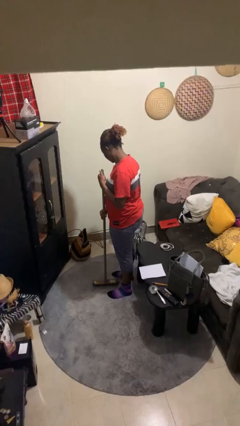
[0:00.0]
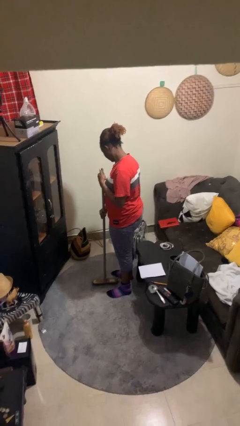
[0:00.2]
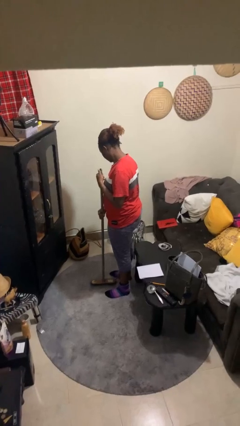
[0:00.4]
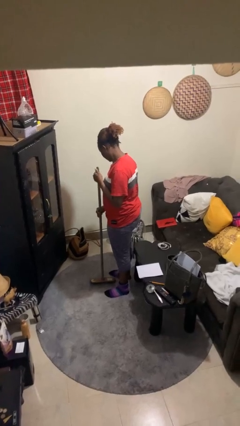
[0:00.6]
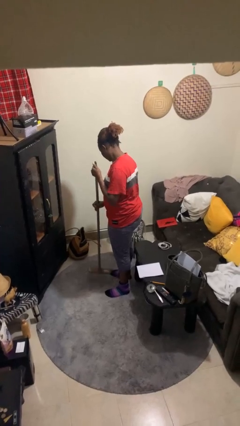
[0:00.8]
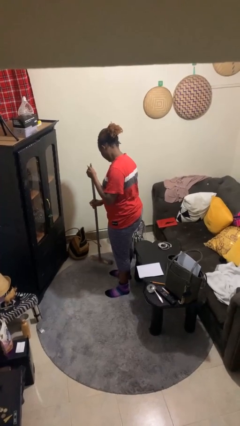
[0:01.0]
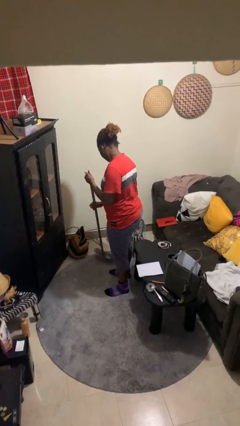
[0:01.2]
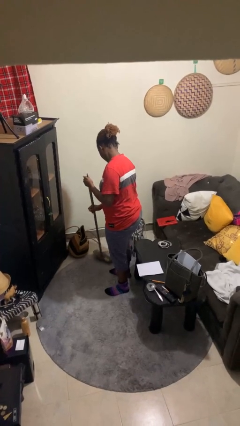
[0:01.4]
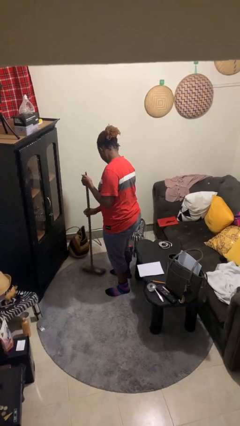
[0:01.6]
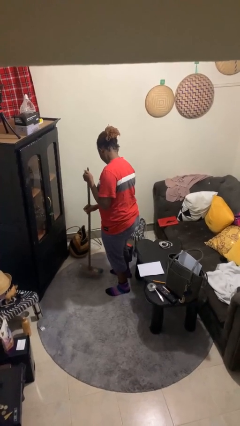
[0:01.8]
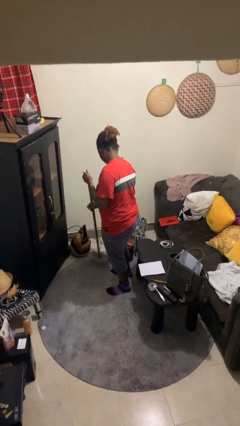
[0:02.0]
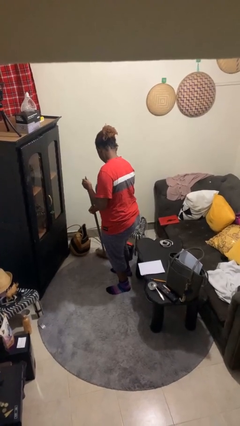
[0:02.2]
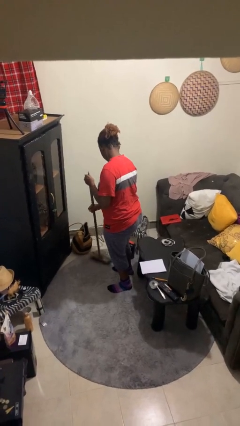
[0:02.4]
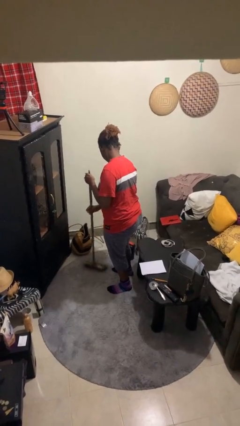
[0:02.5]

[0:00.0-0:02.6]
person sweeps floor

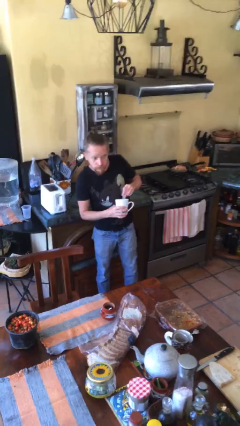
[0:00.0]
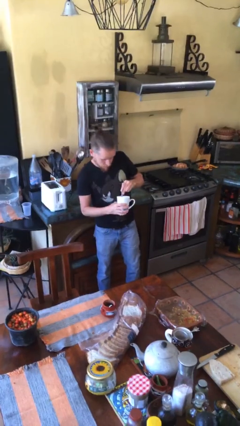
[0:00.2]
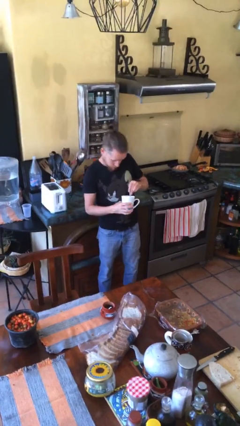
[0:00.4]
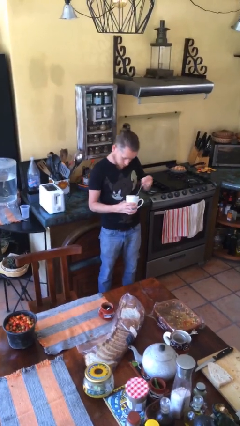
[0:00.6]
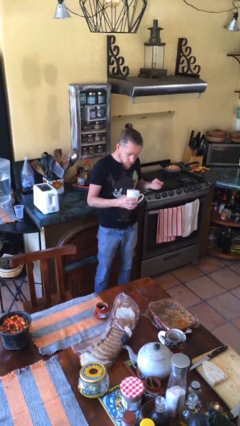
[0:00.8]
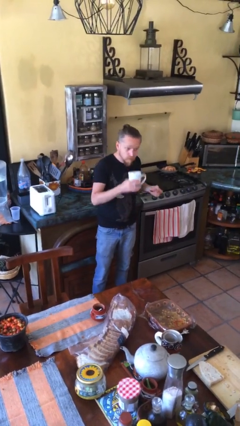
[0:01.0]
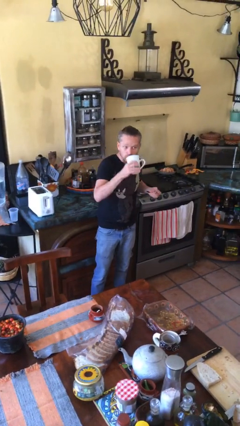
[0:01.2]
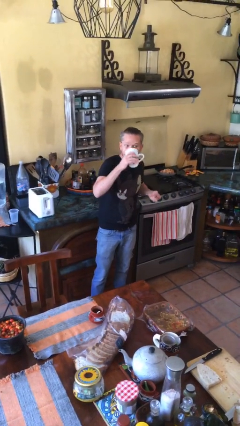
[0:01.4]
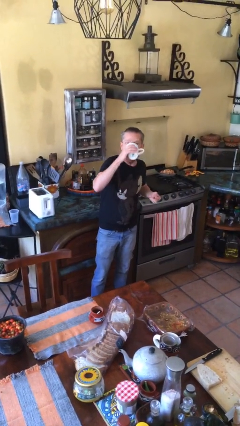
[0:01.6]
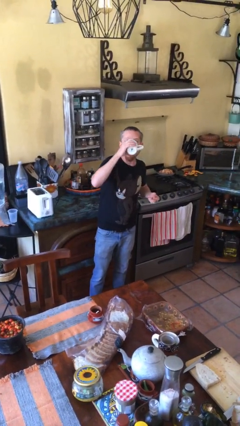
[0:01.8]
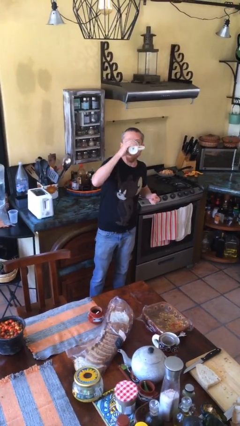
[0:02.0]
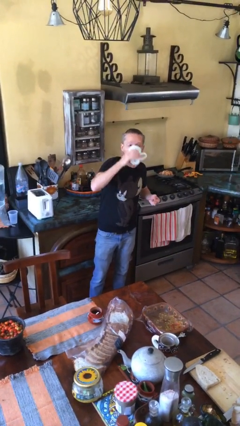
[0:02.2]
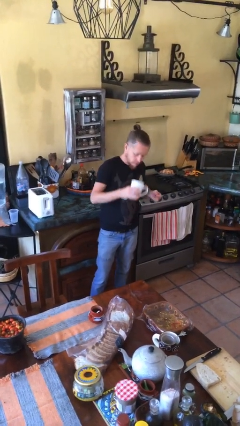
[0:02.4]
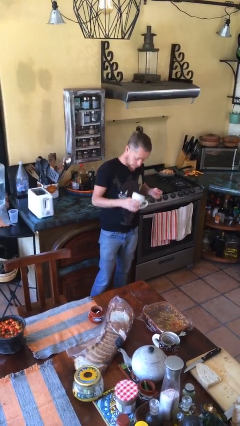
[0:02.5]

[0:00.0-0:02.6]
person drinks from mug

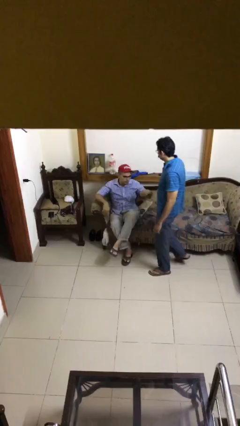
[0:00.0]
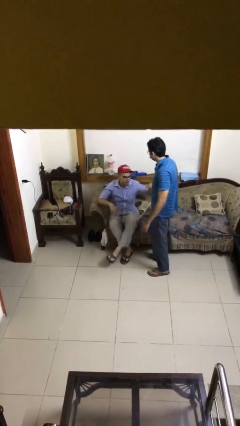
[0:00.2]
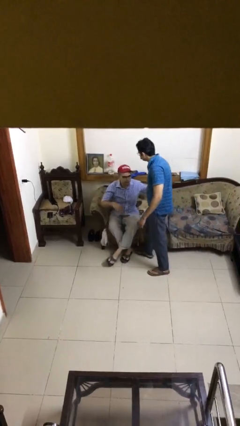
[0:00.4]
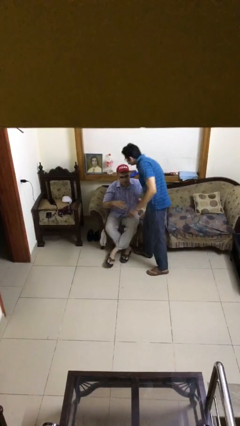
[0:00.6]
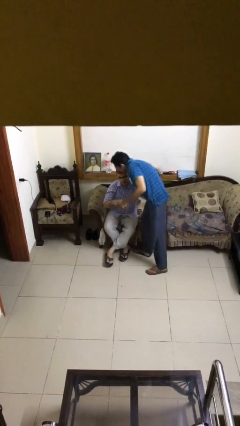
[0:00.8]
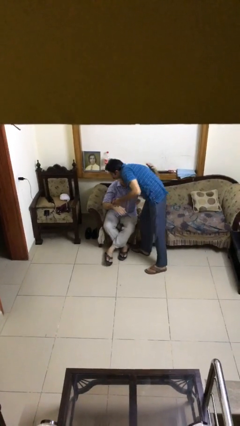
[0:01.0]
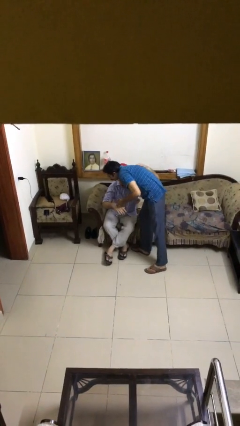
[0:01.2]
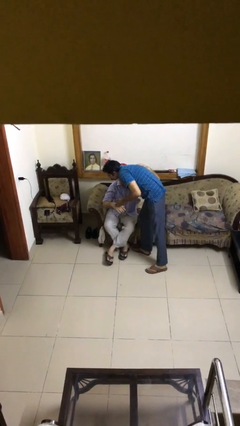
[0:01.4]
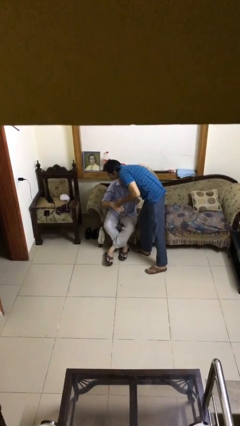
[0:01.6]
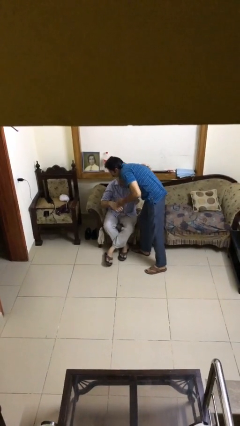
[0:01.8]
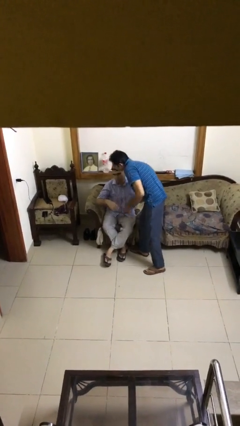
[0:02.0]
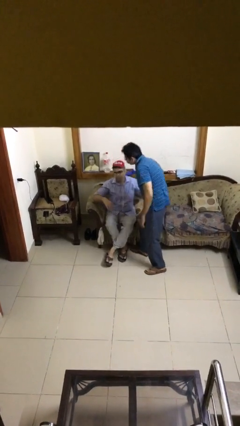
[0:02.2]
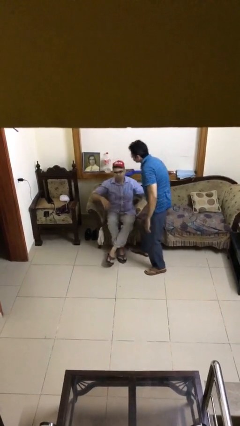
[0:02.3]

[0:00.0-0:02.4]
person embraces person

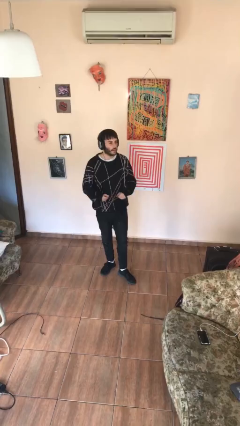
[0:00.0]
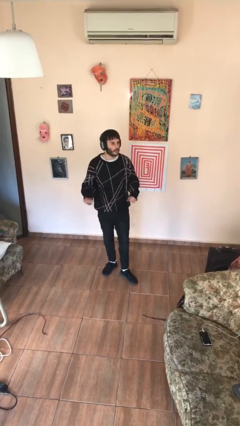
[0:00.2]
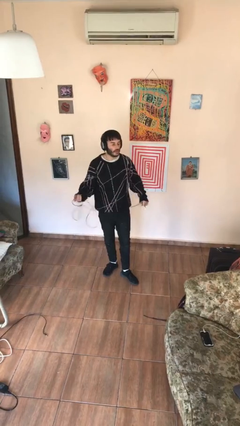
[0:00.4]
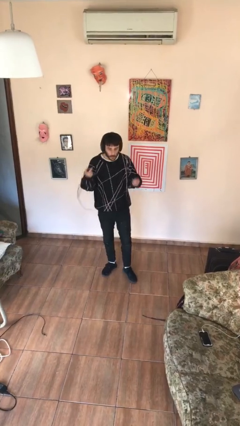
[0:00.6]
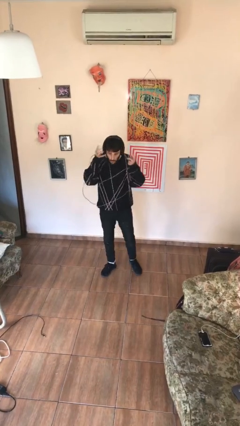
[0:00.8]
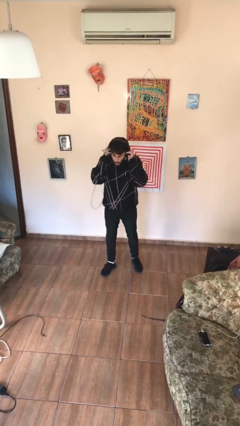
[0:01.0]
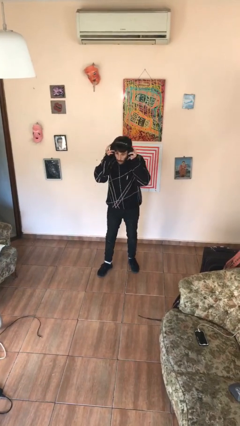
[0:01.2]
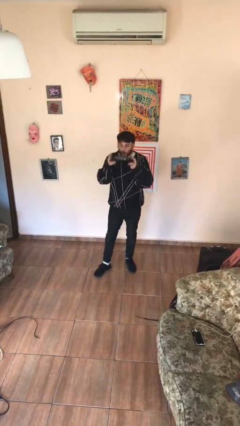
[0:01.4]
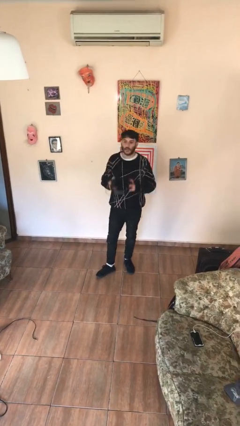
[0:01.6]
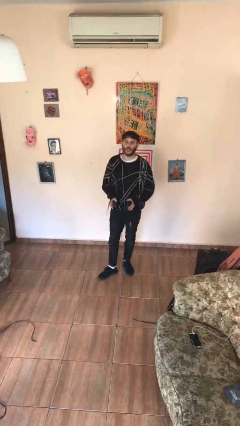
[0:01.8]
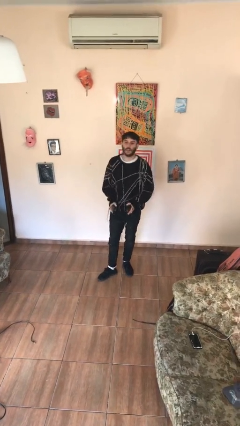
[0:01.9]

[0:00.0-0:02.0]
person takes off headphones

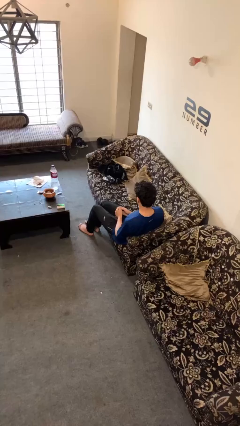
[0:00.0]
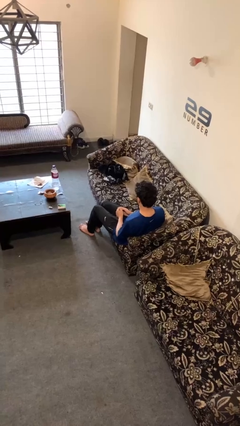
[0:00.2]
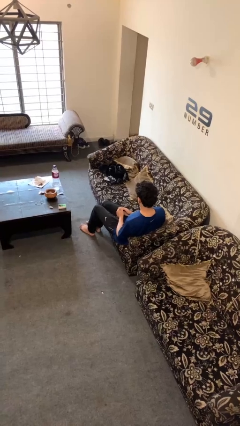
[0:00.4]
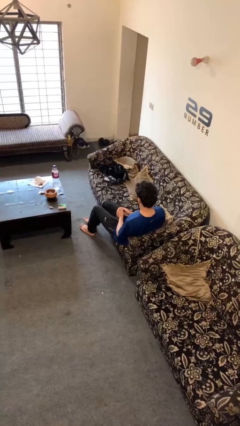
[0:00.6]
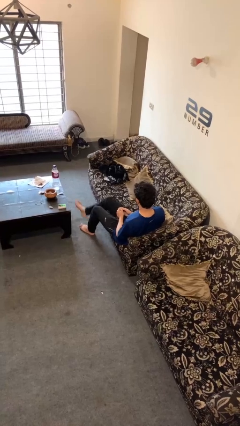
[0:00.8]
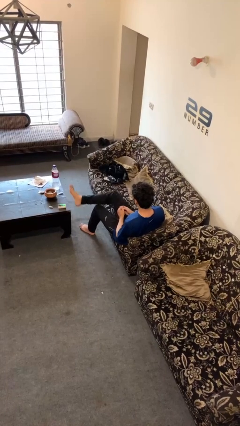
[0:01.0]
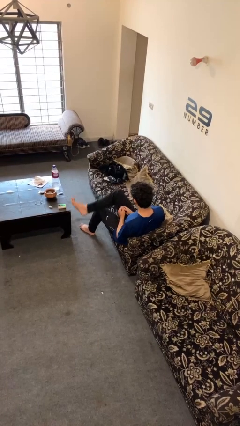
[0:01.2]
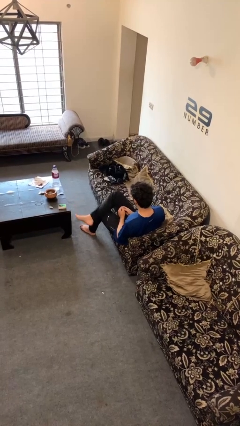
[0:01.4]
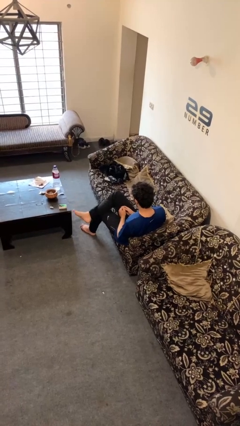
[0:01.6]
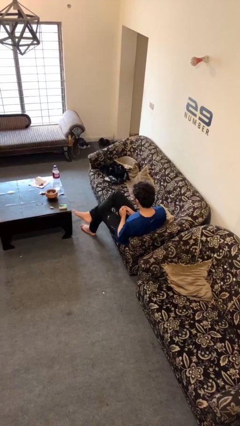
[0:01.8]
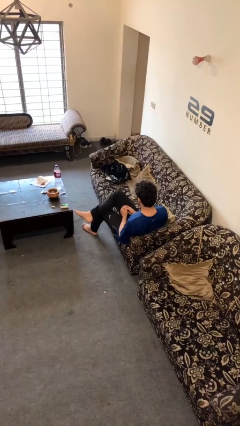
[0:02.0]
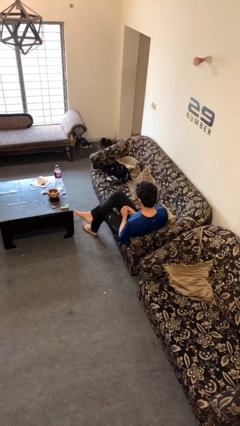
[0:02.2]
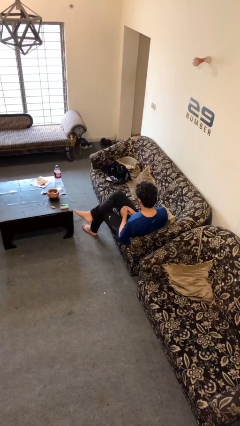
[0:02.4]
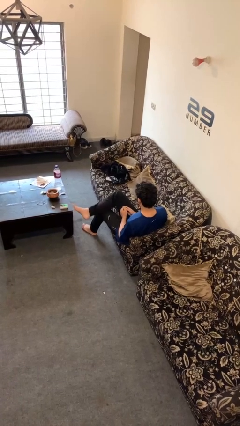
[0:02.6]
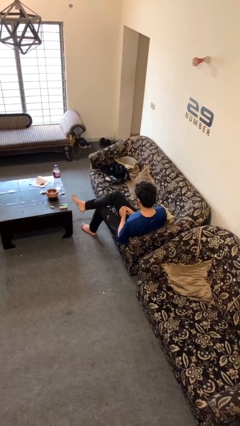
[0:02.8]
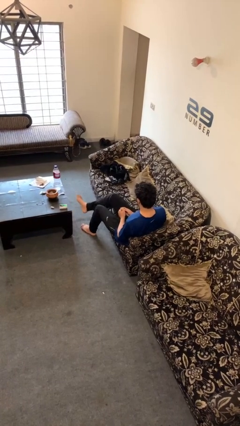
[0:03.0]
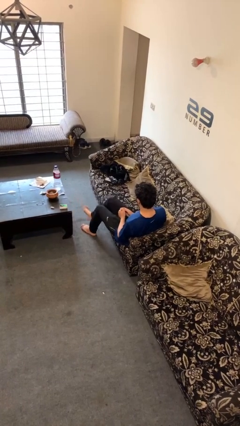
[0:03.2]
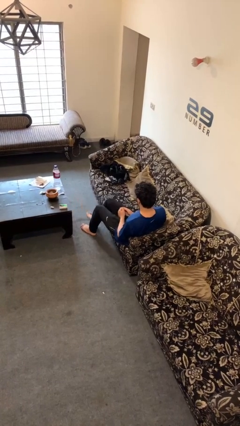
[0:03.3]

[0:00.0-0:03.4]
person crosses legs

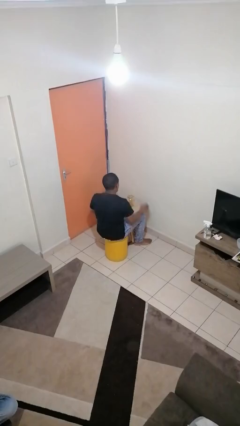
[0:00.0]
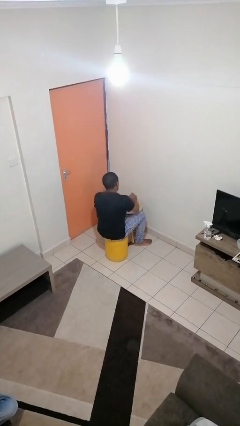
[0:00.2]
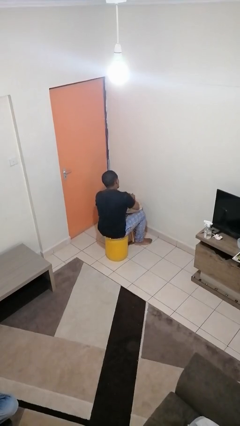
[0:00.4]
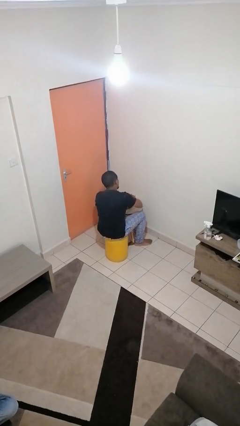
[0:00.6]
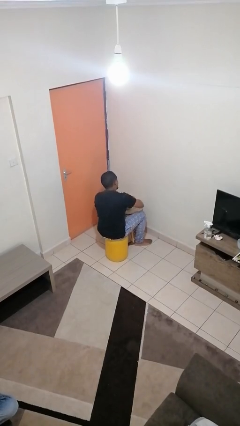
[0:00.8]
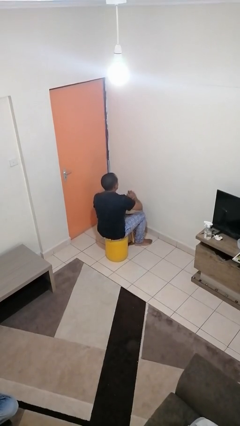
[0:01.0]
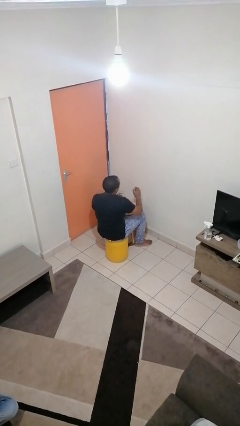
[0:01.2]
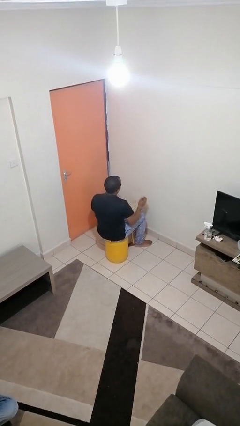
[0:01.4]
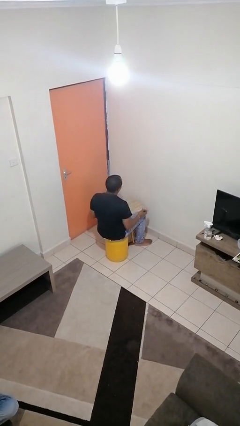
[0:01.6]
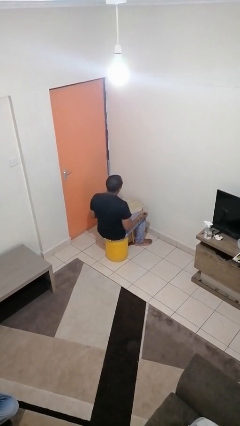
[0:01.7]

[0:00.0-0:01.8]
person opens jar

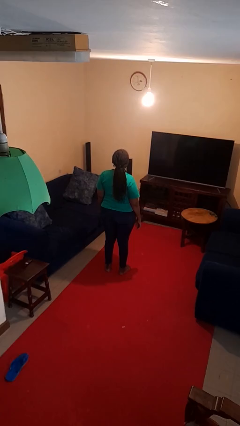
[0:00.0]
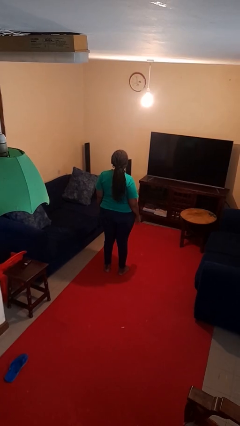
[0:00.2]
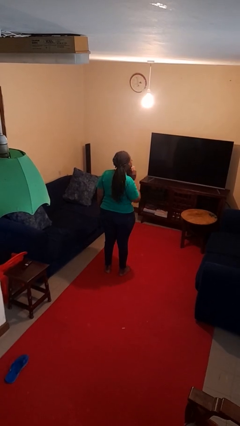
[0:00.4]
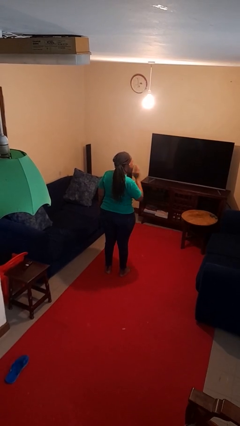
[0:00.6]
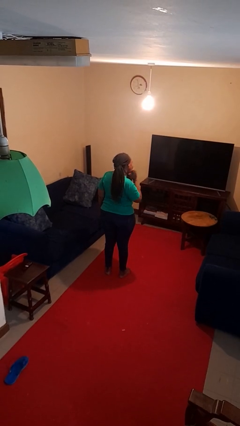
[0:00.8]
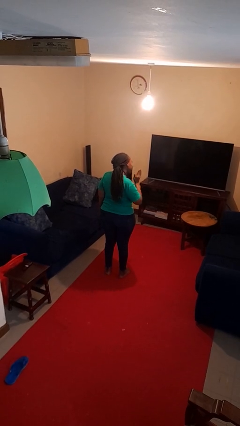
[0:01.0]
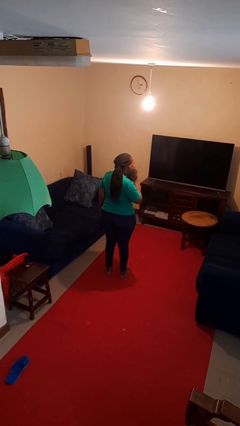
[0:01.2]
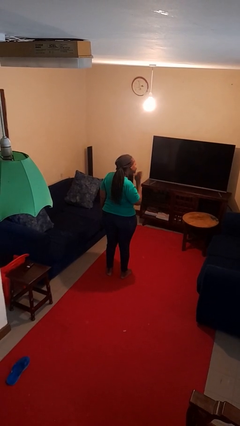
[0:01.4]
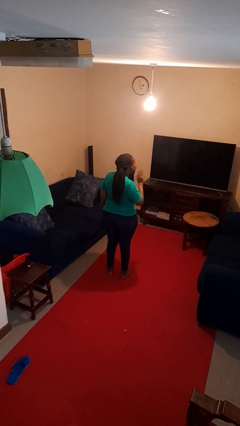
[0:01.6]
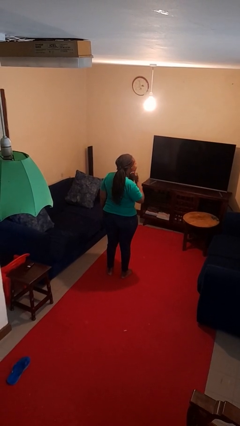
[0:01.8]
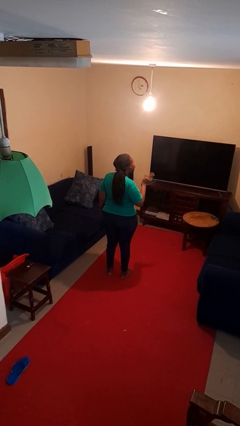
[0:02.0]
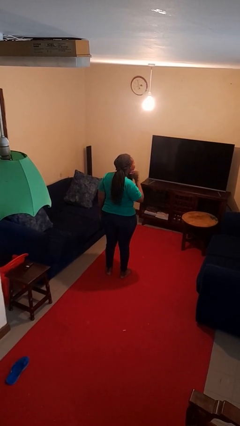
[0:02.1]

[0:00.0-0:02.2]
person swats bug
